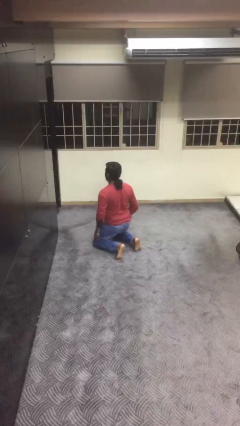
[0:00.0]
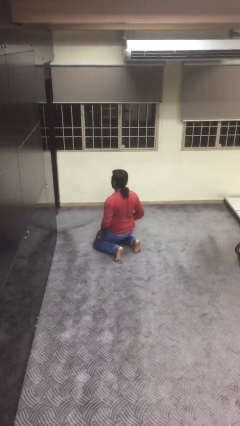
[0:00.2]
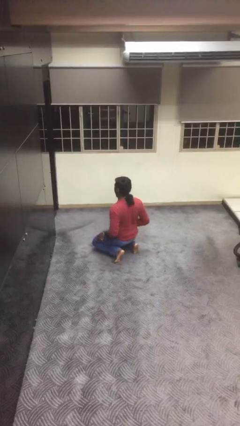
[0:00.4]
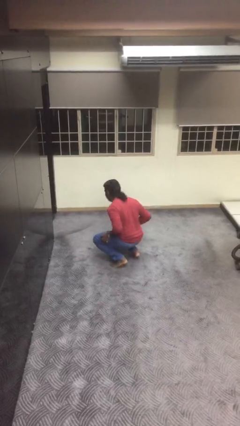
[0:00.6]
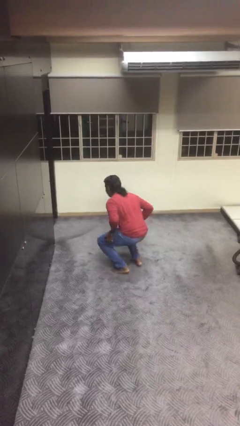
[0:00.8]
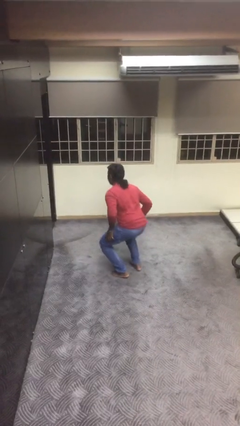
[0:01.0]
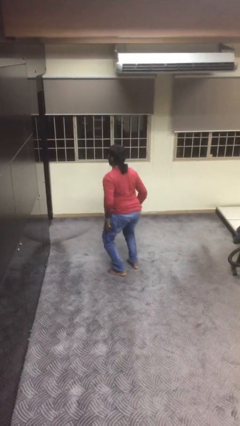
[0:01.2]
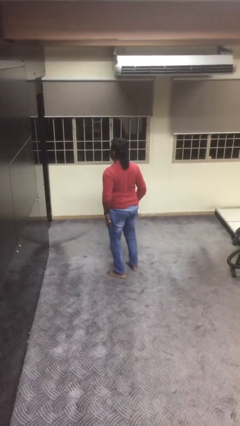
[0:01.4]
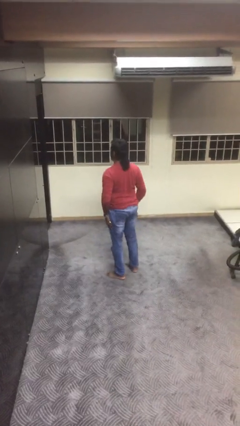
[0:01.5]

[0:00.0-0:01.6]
person stands up from floor

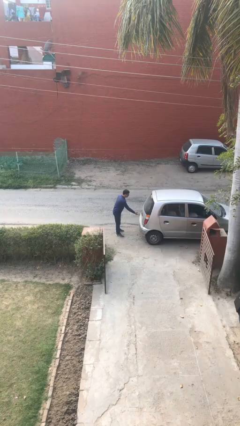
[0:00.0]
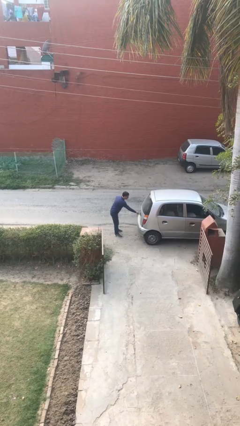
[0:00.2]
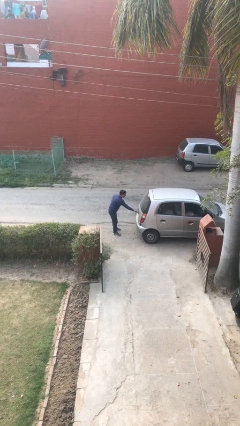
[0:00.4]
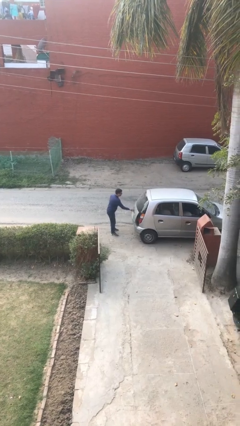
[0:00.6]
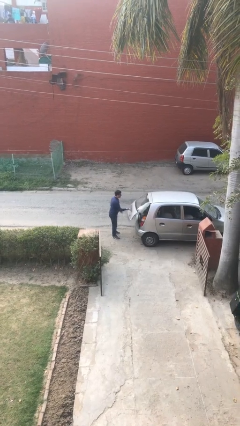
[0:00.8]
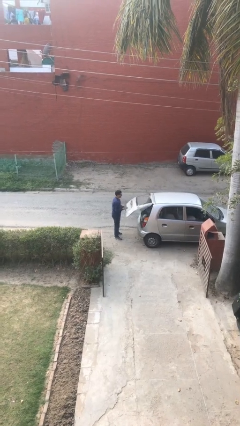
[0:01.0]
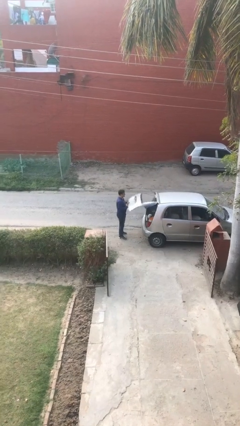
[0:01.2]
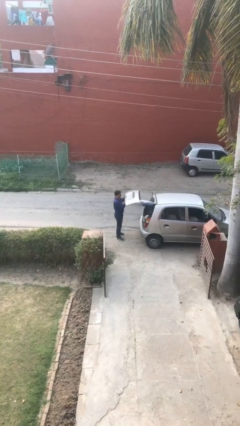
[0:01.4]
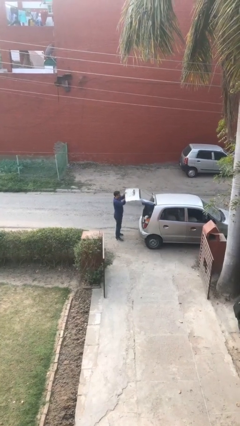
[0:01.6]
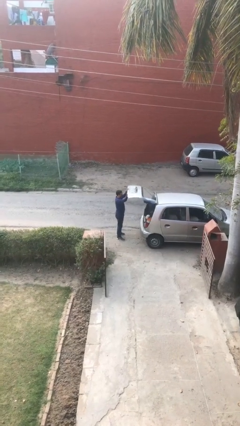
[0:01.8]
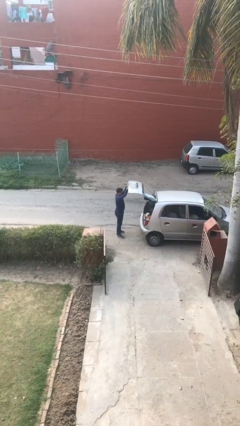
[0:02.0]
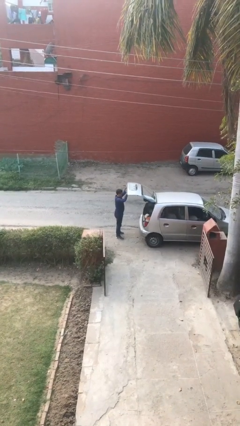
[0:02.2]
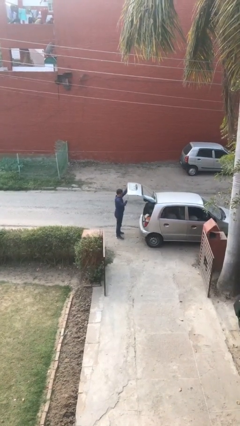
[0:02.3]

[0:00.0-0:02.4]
person opens car trunk

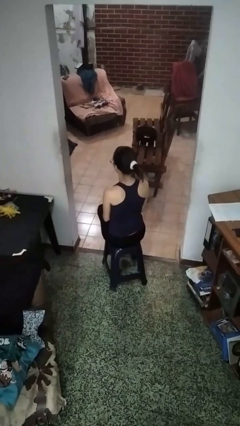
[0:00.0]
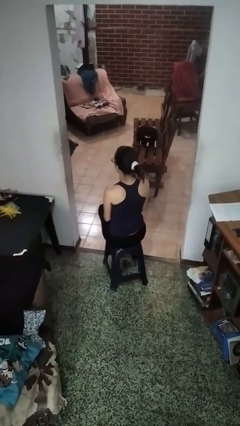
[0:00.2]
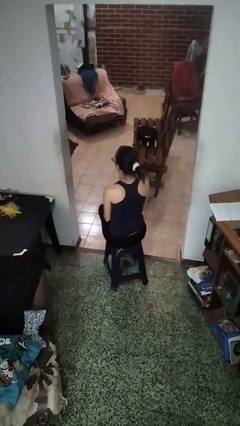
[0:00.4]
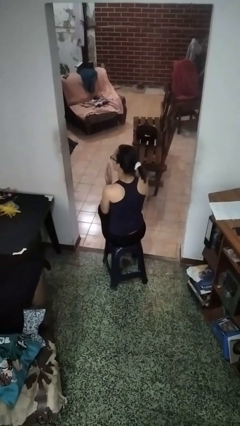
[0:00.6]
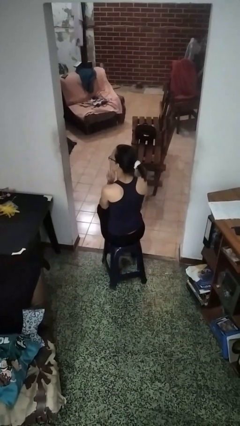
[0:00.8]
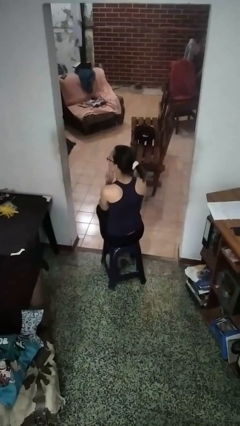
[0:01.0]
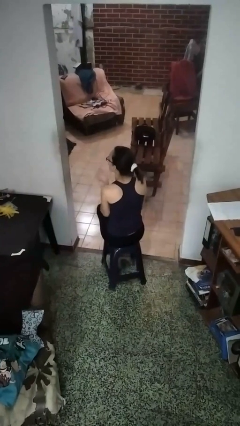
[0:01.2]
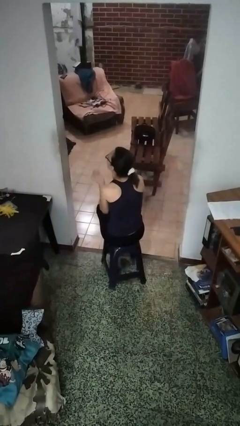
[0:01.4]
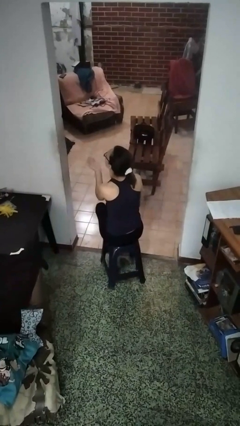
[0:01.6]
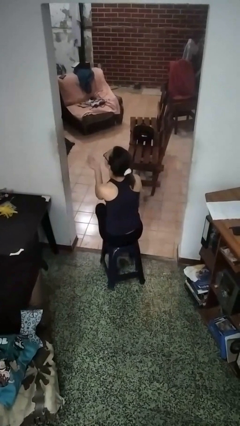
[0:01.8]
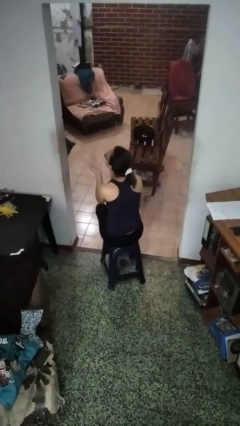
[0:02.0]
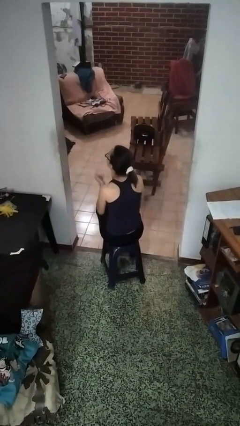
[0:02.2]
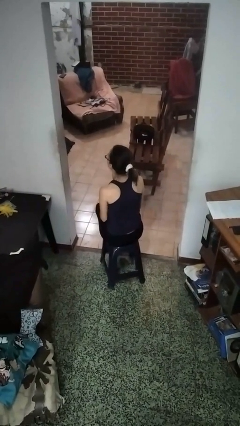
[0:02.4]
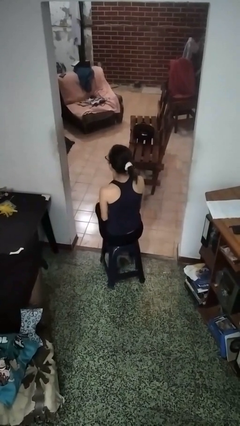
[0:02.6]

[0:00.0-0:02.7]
person gestures blow kiss

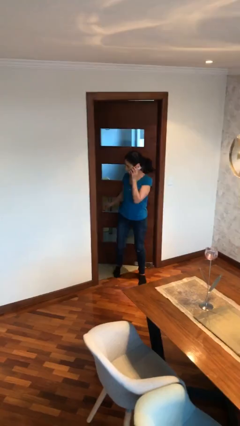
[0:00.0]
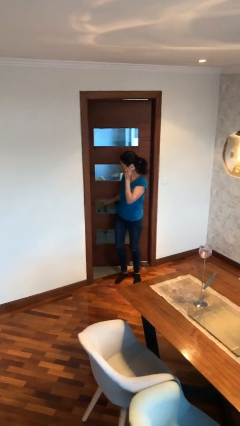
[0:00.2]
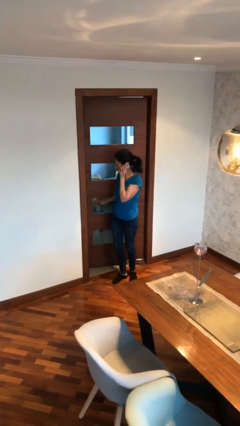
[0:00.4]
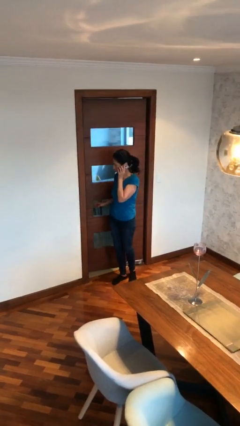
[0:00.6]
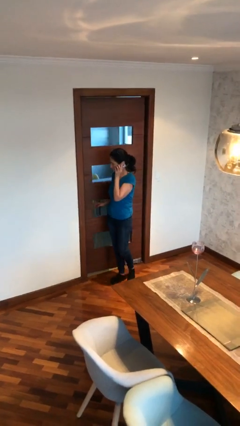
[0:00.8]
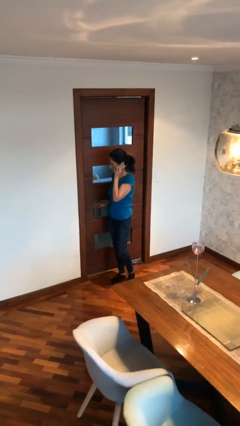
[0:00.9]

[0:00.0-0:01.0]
person closes facility door

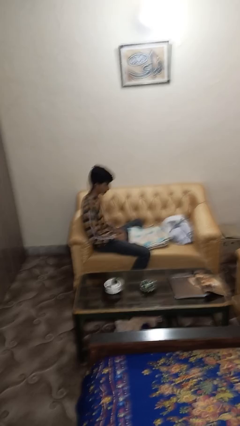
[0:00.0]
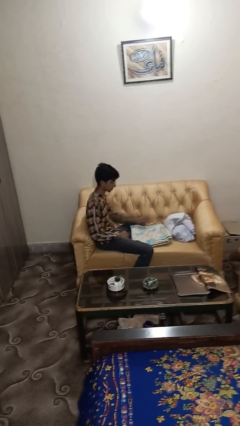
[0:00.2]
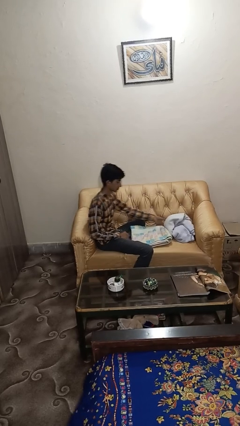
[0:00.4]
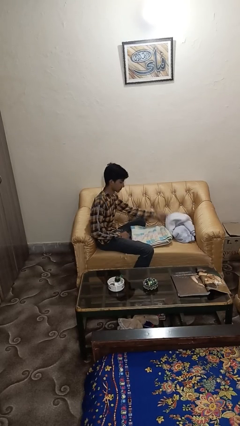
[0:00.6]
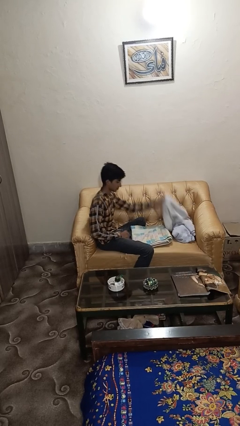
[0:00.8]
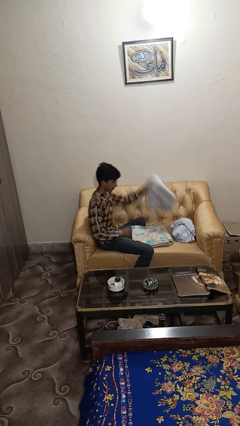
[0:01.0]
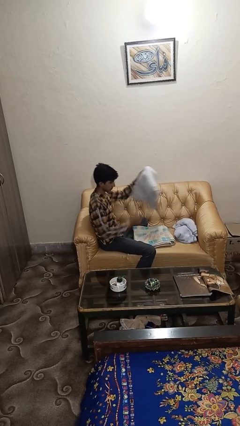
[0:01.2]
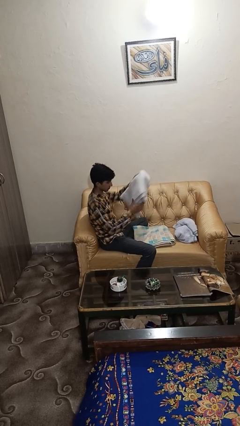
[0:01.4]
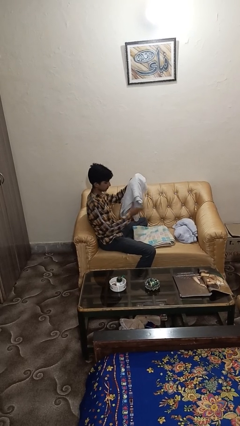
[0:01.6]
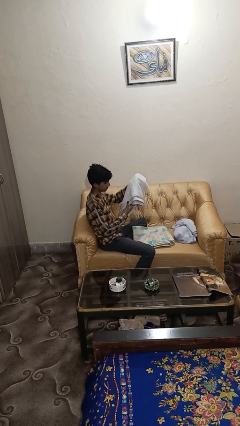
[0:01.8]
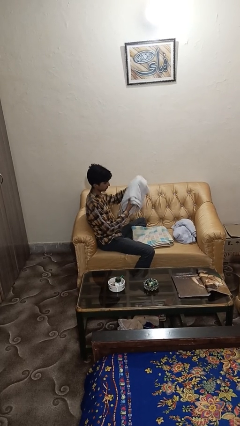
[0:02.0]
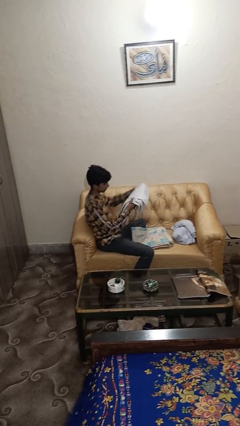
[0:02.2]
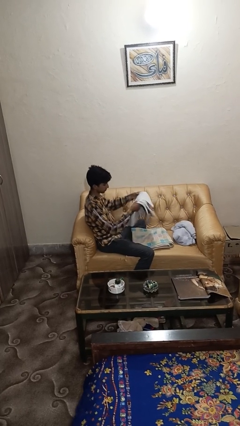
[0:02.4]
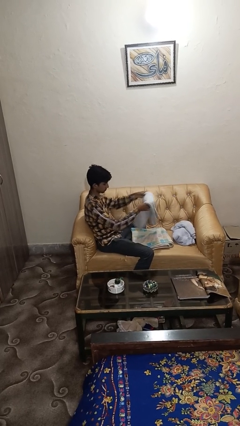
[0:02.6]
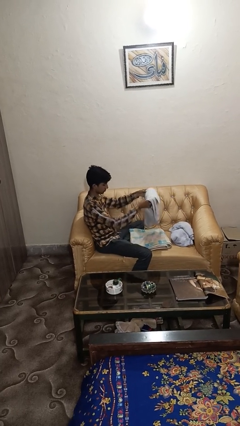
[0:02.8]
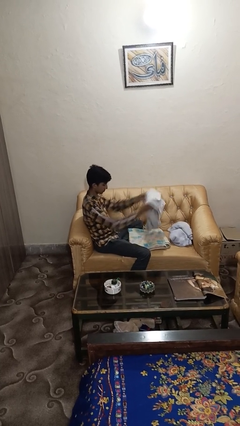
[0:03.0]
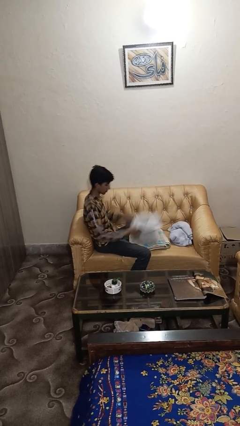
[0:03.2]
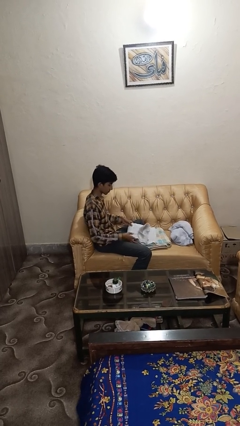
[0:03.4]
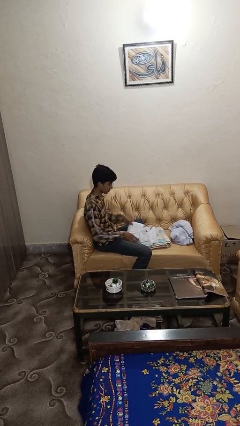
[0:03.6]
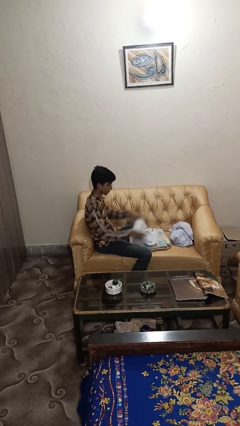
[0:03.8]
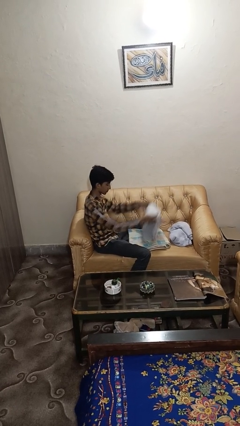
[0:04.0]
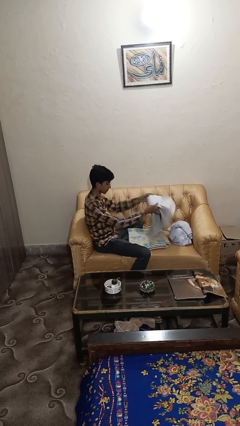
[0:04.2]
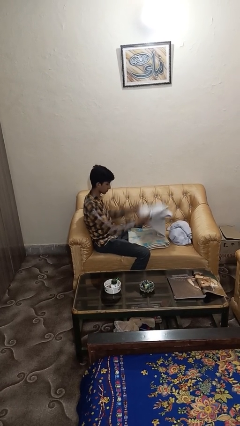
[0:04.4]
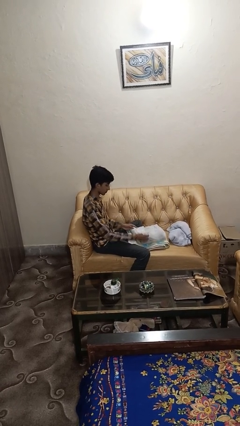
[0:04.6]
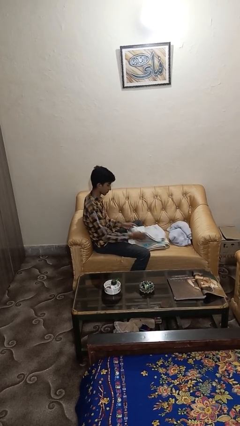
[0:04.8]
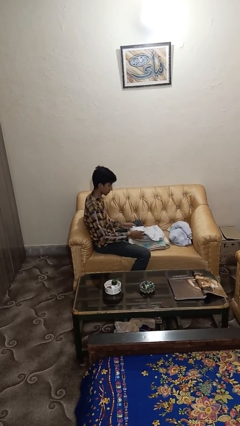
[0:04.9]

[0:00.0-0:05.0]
person folds towel

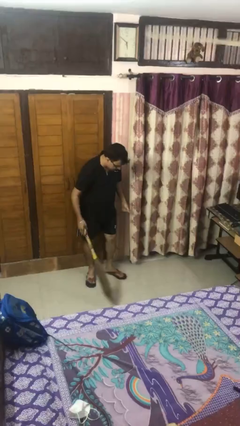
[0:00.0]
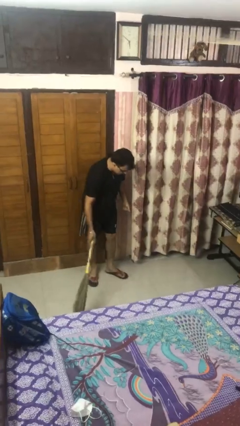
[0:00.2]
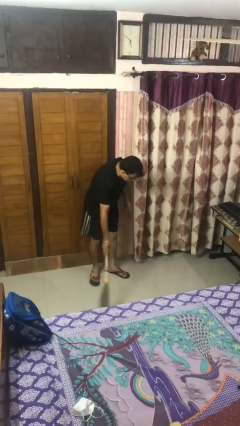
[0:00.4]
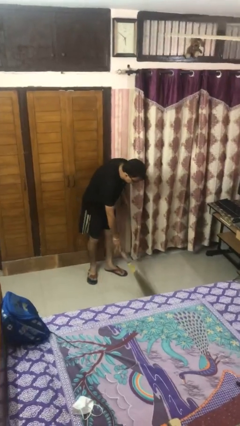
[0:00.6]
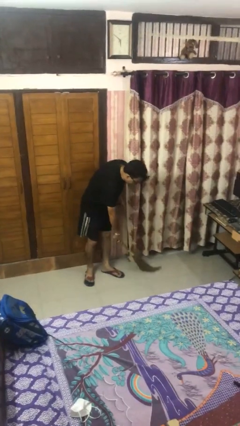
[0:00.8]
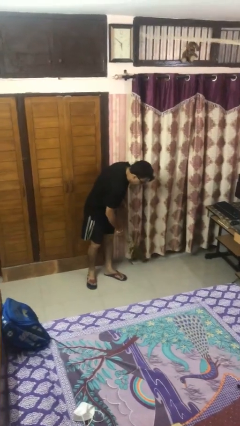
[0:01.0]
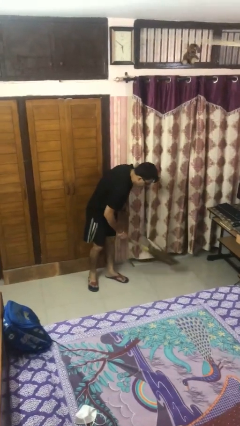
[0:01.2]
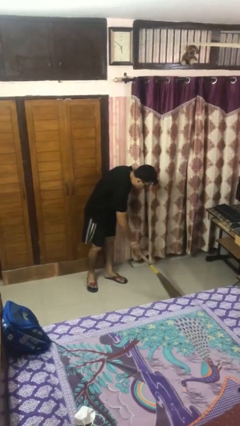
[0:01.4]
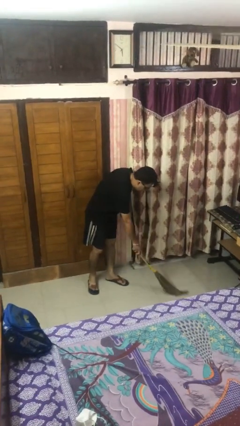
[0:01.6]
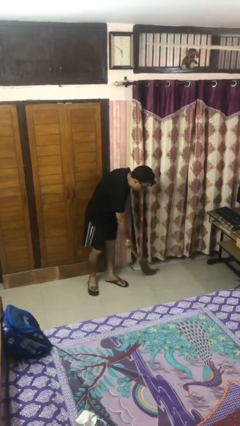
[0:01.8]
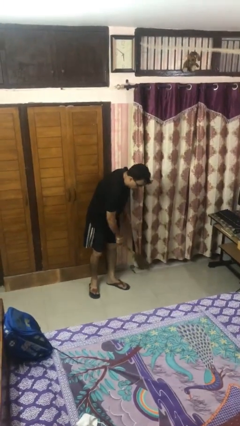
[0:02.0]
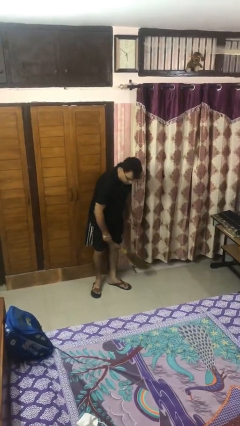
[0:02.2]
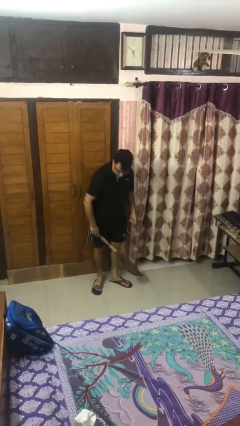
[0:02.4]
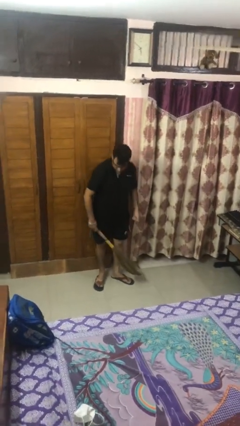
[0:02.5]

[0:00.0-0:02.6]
person sweeps floor

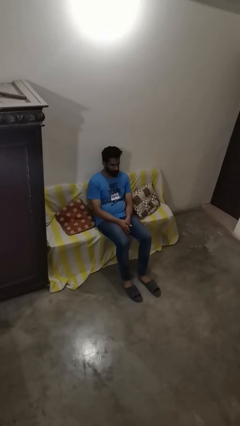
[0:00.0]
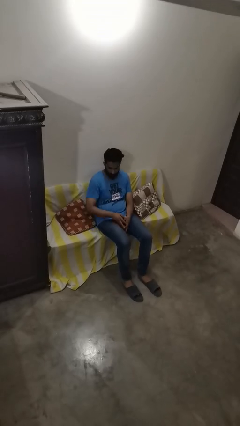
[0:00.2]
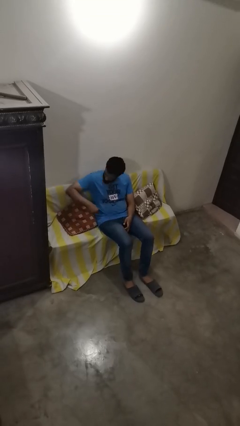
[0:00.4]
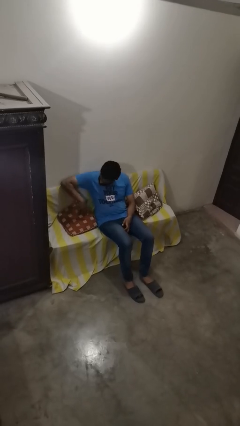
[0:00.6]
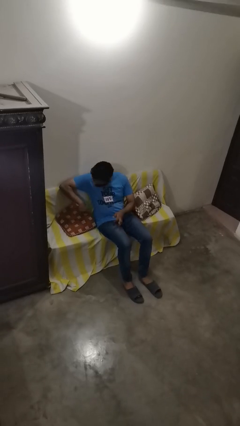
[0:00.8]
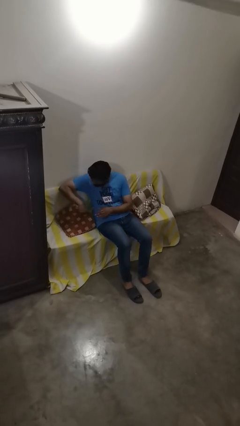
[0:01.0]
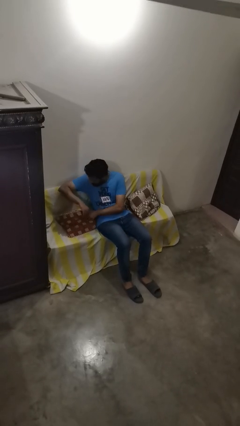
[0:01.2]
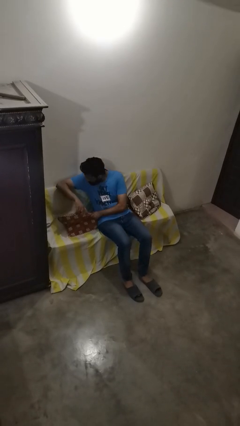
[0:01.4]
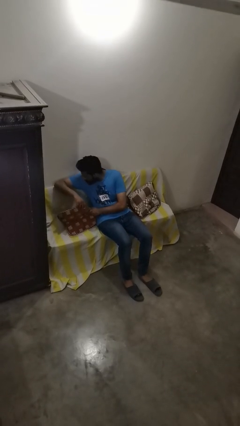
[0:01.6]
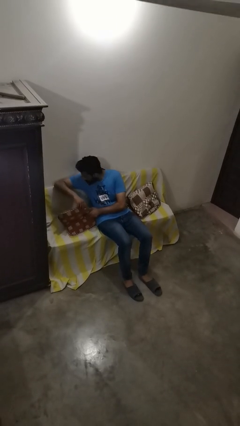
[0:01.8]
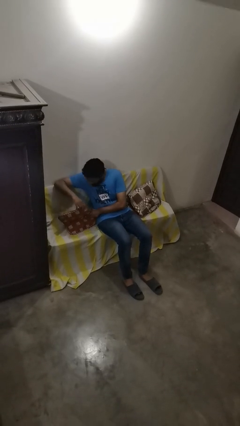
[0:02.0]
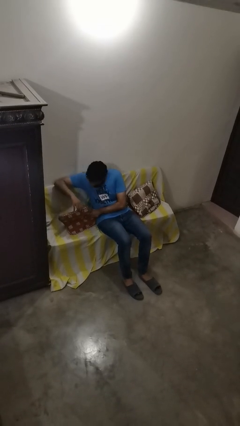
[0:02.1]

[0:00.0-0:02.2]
person searches in couch
